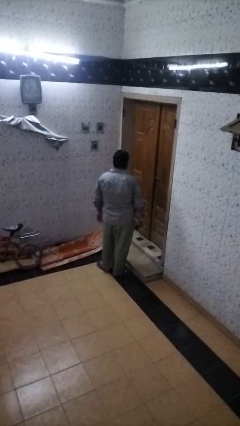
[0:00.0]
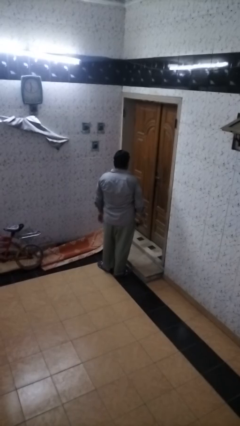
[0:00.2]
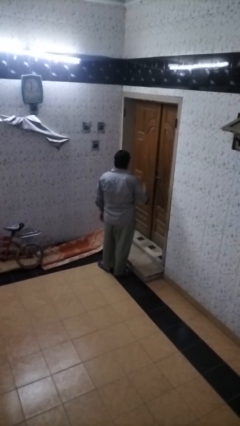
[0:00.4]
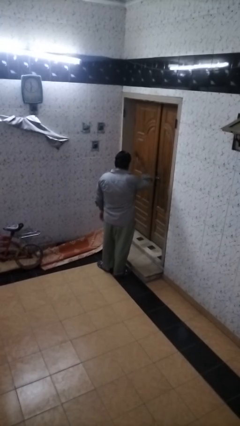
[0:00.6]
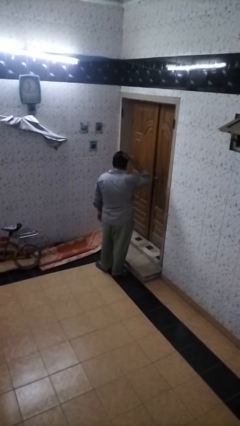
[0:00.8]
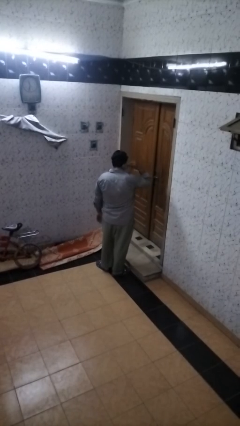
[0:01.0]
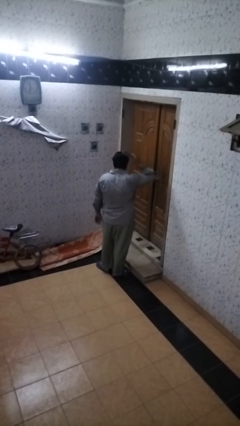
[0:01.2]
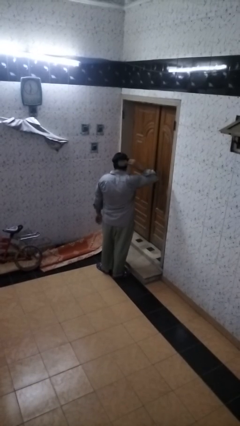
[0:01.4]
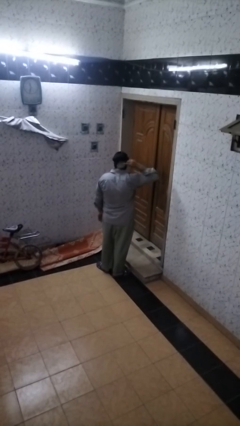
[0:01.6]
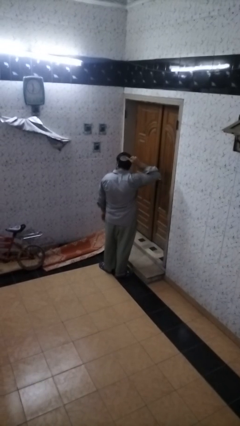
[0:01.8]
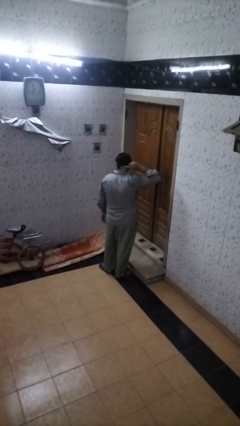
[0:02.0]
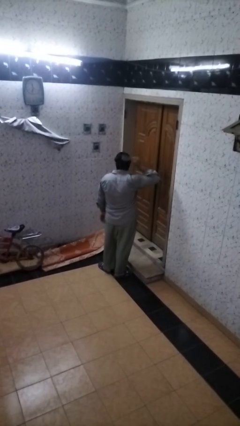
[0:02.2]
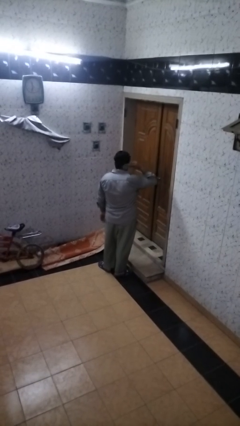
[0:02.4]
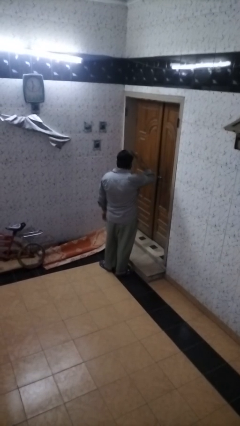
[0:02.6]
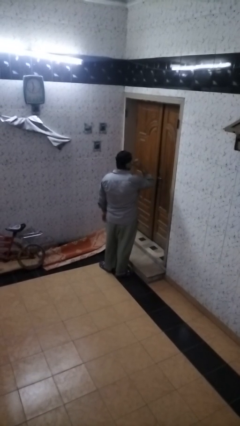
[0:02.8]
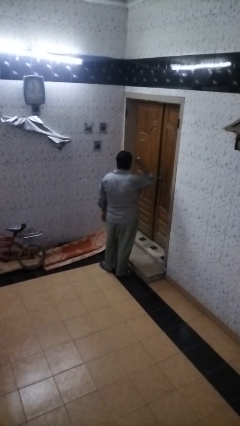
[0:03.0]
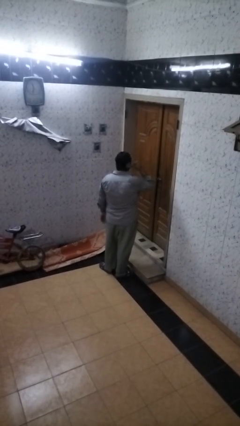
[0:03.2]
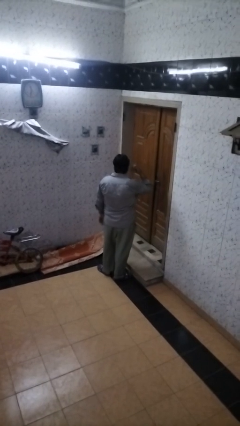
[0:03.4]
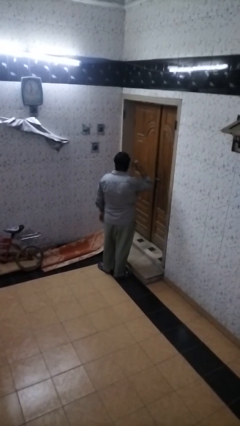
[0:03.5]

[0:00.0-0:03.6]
person brushes hair

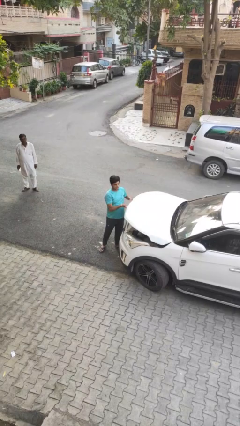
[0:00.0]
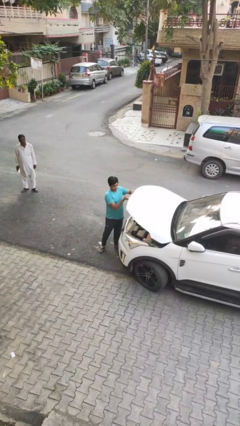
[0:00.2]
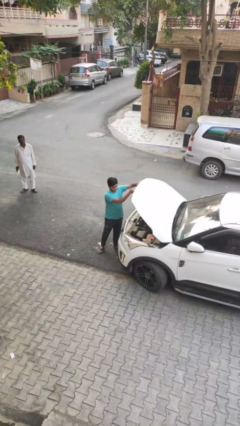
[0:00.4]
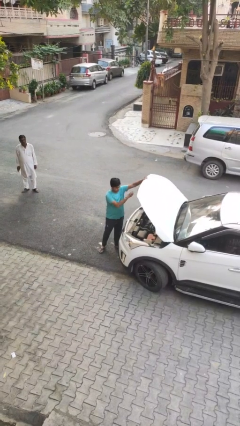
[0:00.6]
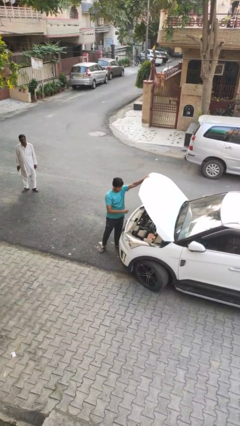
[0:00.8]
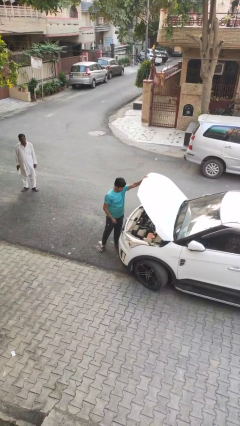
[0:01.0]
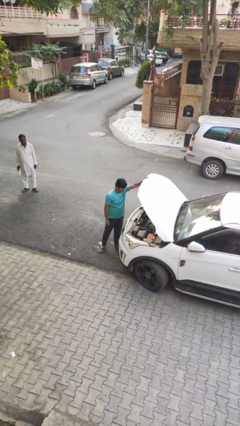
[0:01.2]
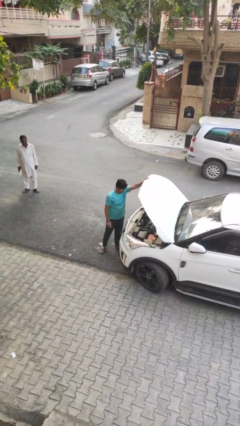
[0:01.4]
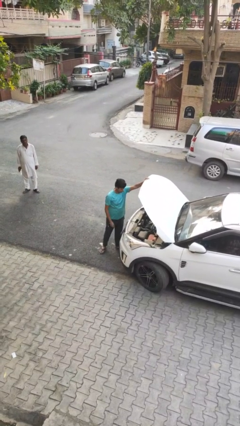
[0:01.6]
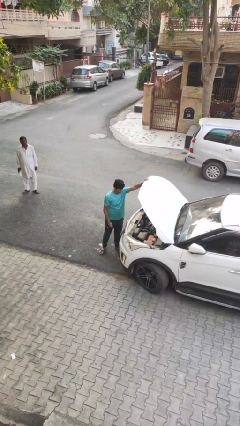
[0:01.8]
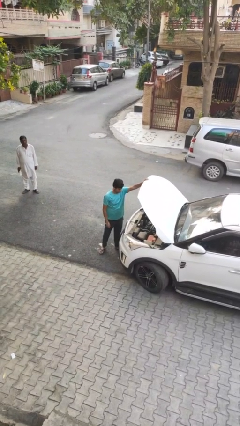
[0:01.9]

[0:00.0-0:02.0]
person opens car hood

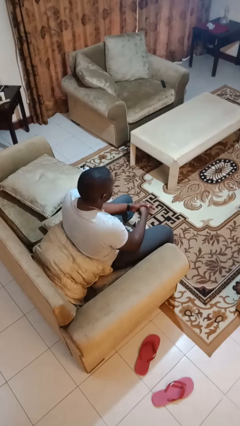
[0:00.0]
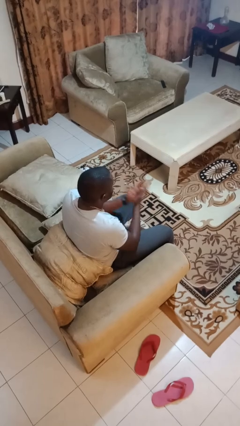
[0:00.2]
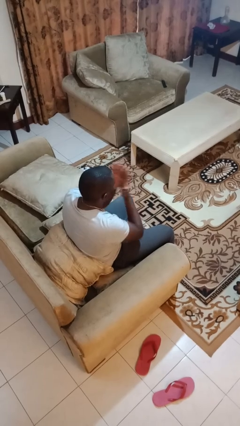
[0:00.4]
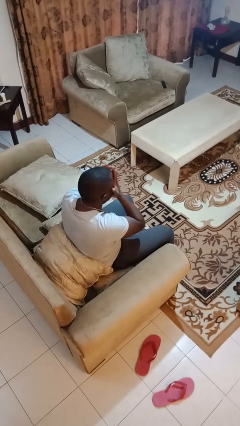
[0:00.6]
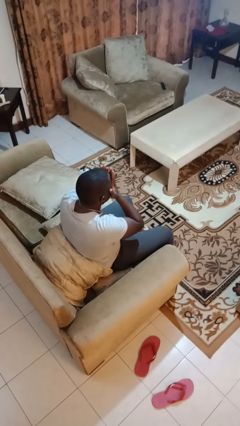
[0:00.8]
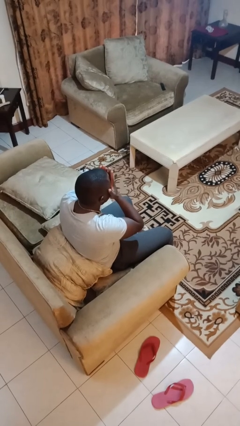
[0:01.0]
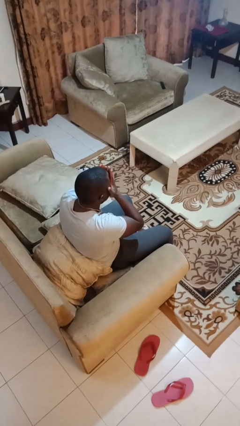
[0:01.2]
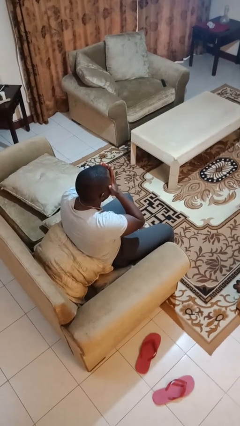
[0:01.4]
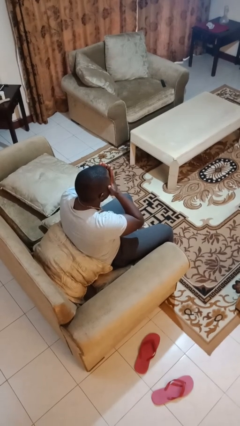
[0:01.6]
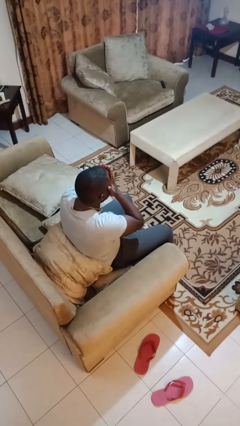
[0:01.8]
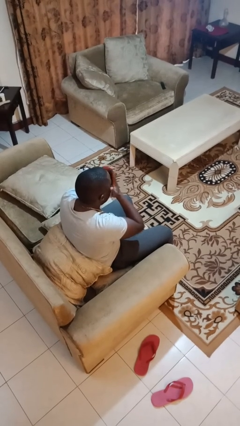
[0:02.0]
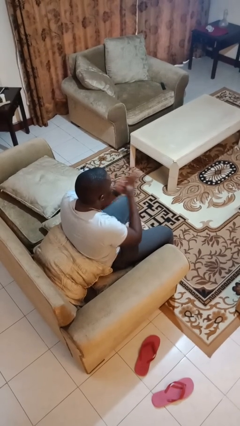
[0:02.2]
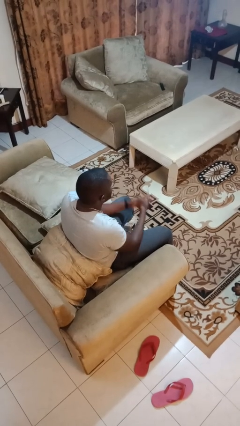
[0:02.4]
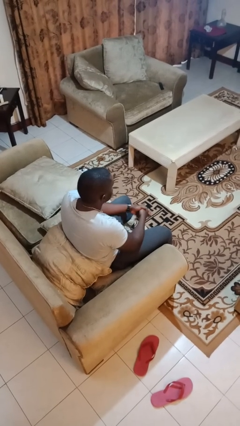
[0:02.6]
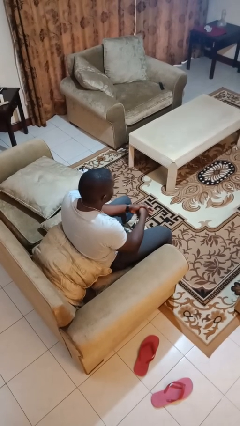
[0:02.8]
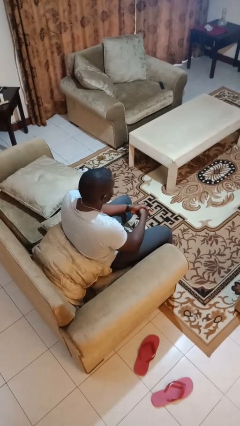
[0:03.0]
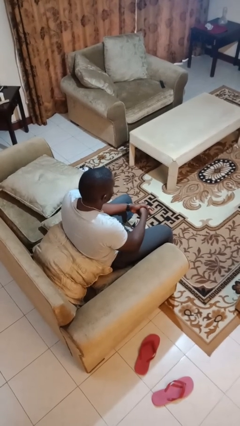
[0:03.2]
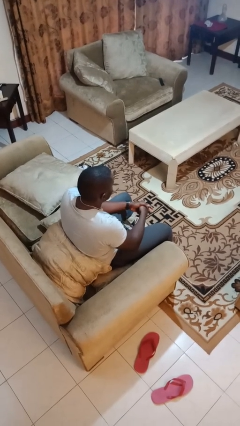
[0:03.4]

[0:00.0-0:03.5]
person covers face with hands

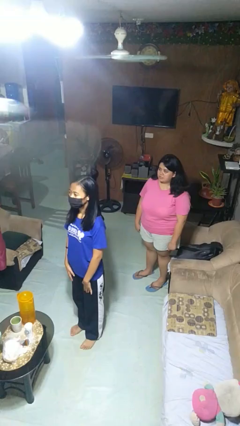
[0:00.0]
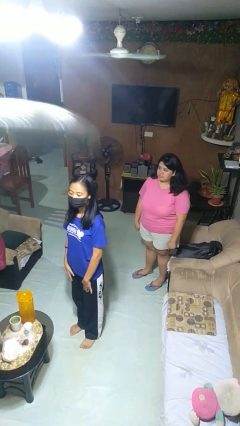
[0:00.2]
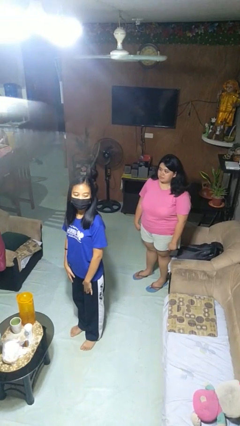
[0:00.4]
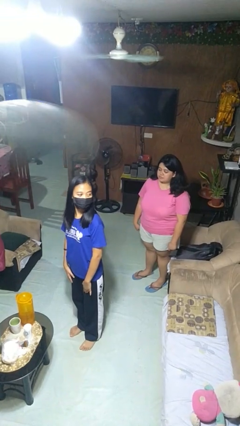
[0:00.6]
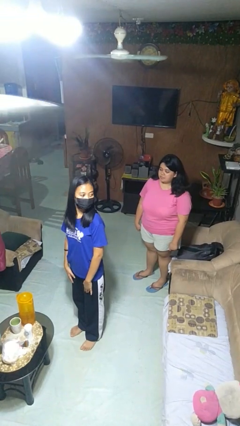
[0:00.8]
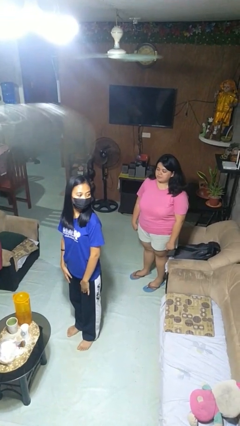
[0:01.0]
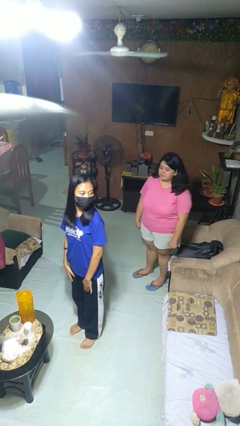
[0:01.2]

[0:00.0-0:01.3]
person looks over shoulder

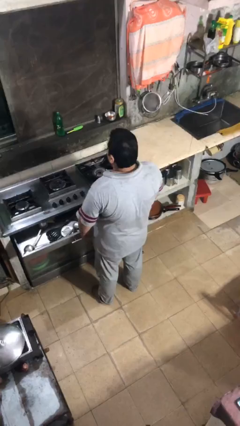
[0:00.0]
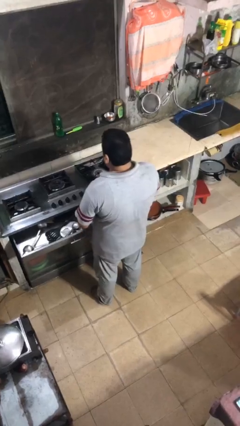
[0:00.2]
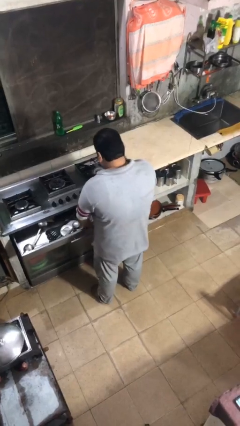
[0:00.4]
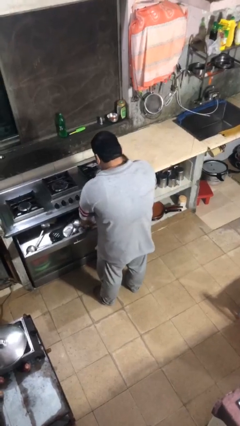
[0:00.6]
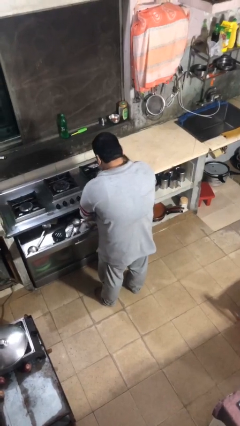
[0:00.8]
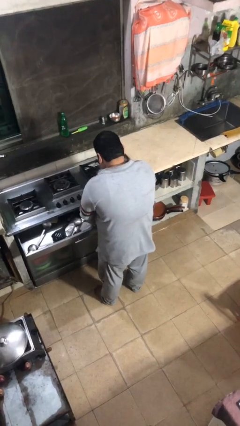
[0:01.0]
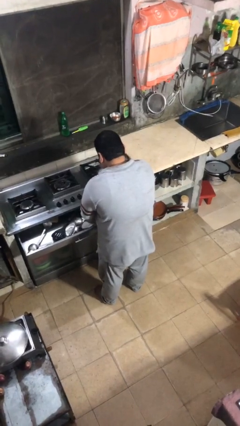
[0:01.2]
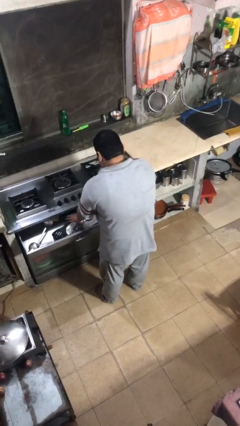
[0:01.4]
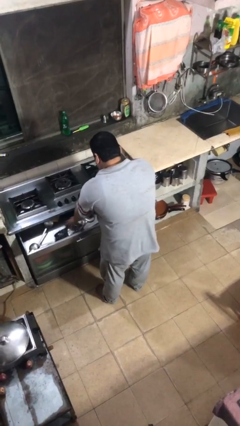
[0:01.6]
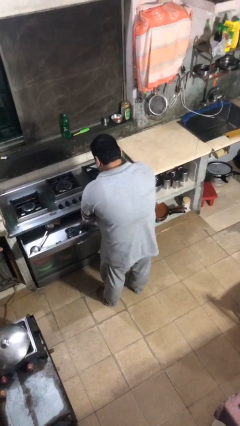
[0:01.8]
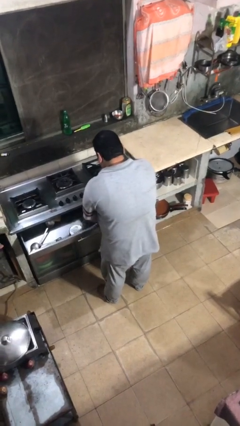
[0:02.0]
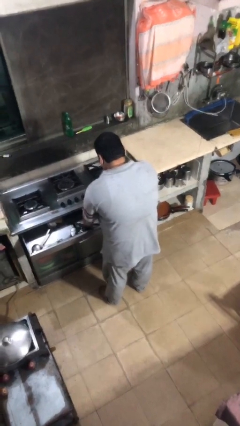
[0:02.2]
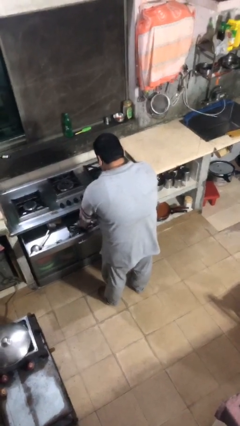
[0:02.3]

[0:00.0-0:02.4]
person searches in kitchen drawer

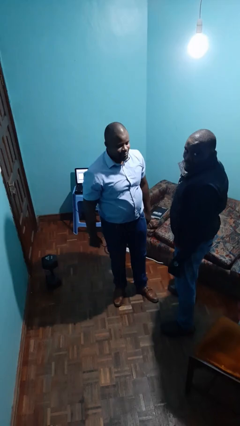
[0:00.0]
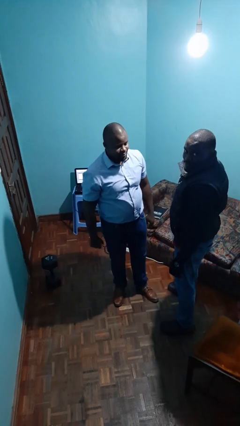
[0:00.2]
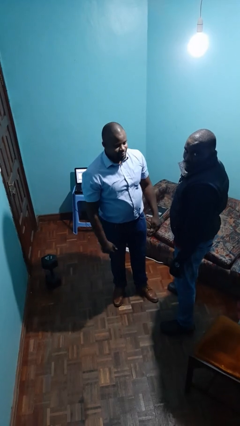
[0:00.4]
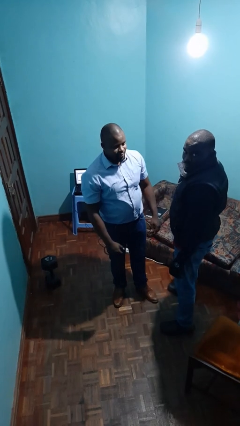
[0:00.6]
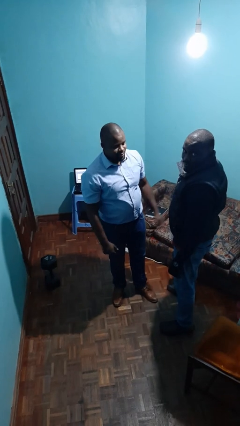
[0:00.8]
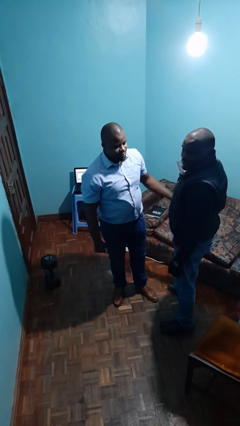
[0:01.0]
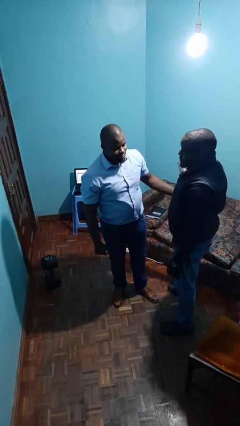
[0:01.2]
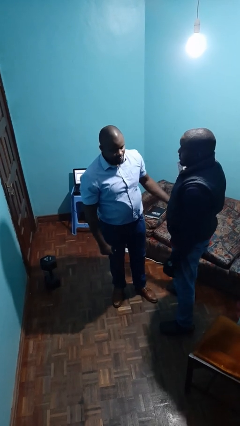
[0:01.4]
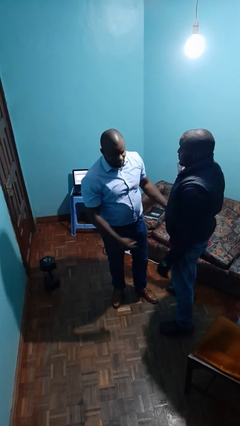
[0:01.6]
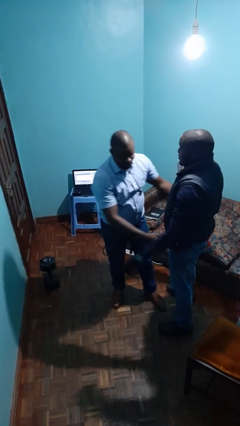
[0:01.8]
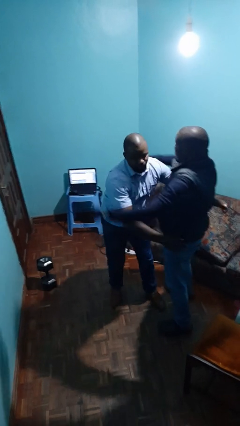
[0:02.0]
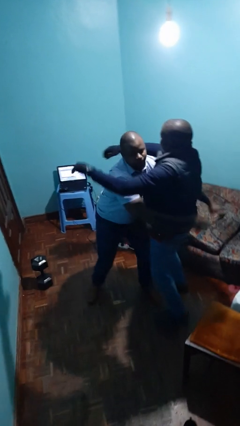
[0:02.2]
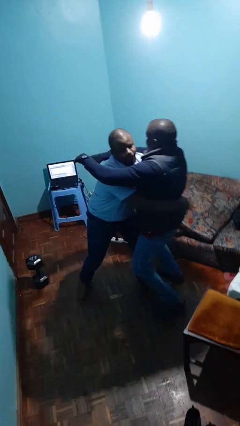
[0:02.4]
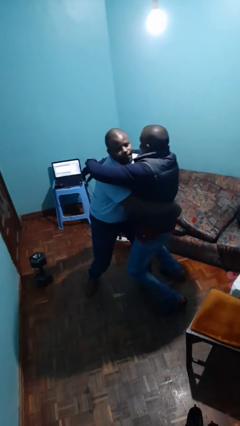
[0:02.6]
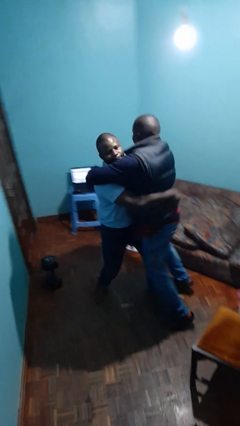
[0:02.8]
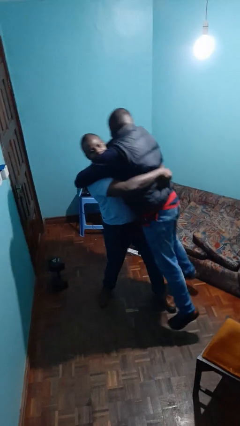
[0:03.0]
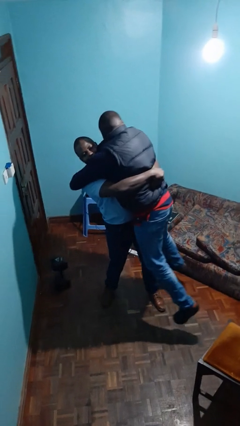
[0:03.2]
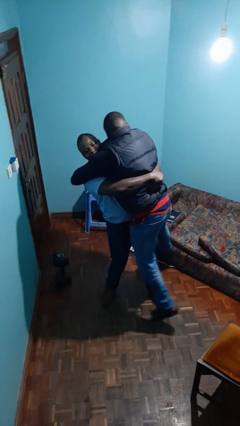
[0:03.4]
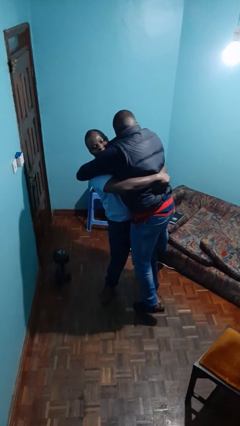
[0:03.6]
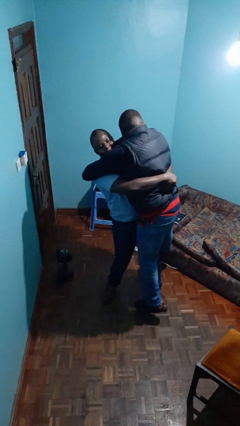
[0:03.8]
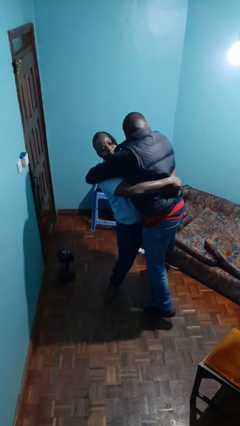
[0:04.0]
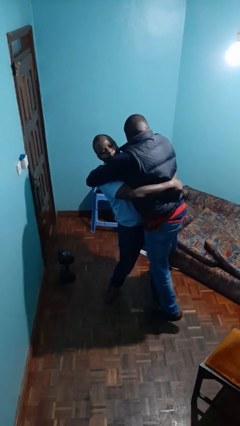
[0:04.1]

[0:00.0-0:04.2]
person picks up person

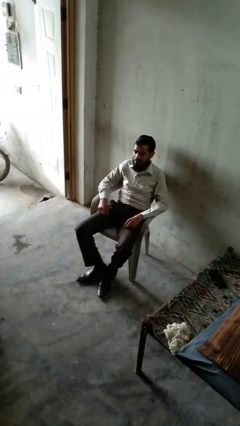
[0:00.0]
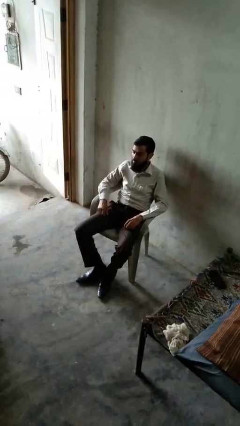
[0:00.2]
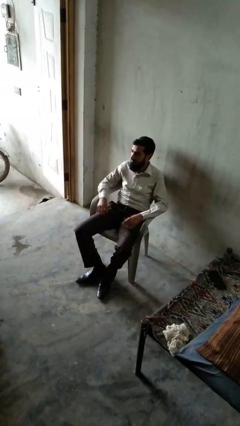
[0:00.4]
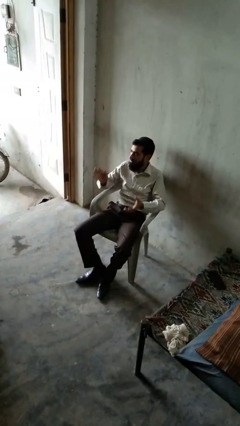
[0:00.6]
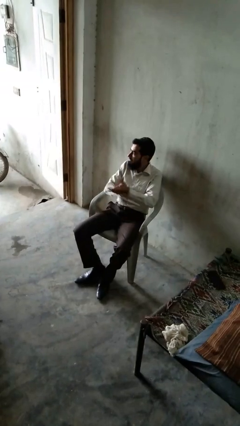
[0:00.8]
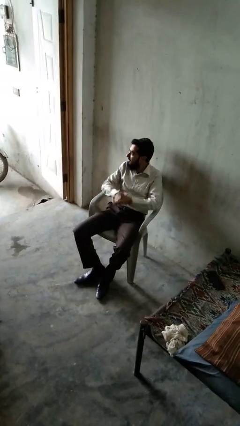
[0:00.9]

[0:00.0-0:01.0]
person claps hands
